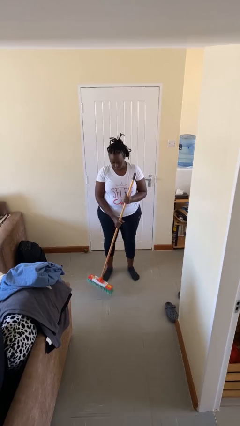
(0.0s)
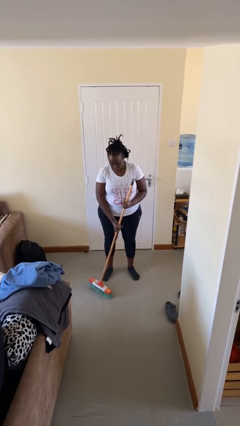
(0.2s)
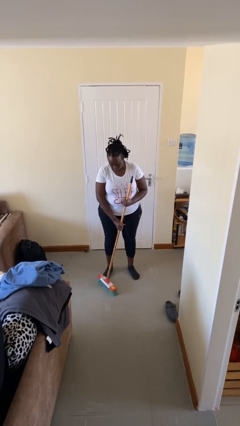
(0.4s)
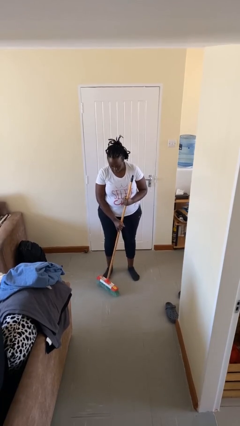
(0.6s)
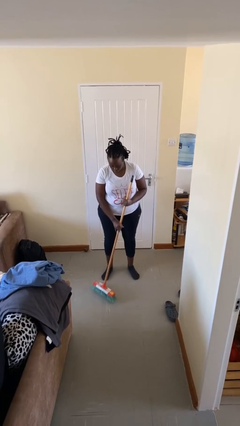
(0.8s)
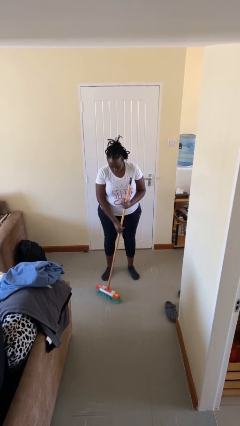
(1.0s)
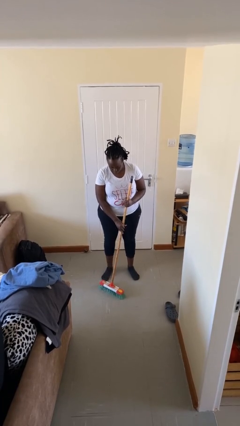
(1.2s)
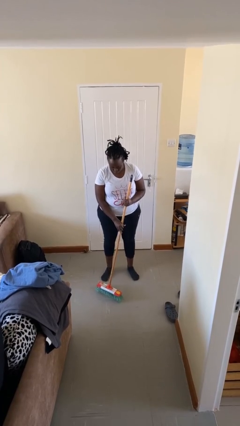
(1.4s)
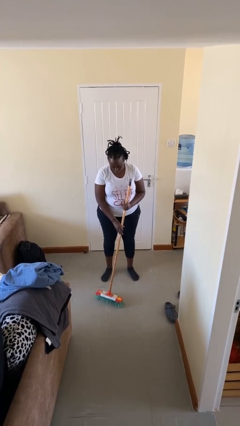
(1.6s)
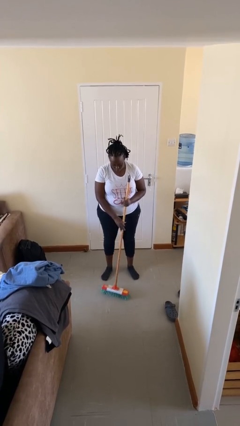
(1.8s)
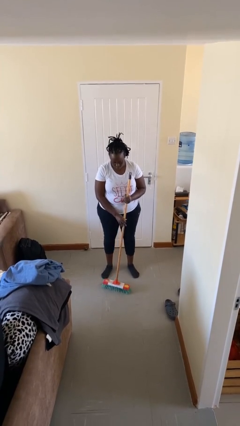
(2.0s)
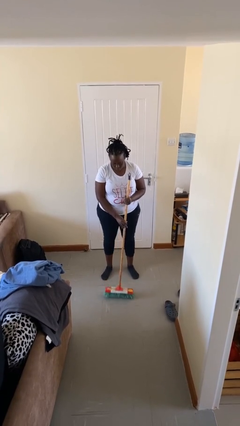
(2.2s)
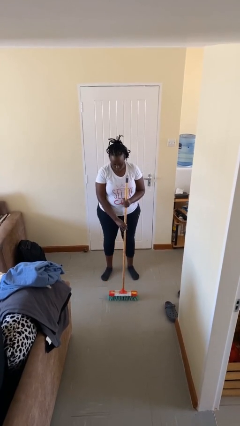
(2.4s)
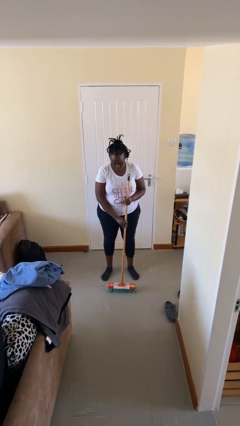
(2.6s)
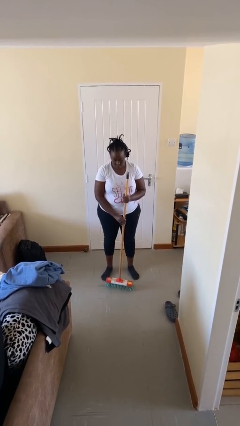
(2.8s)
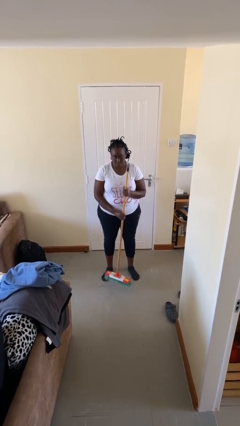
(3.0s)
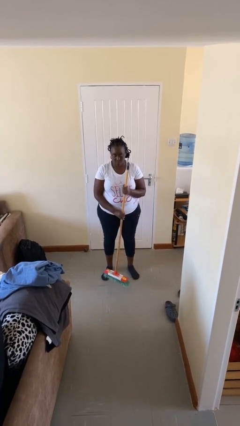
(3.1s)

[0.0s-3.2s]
person sweeps floor

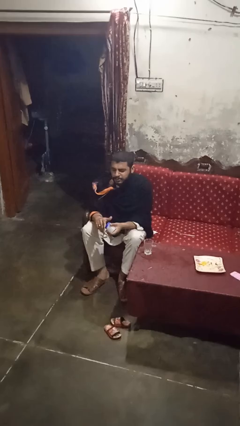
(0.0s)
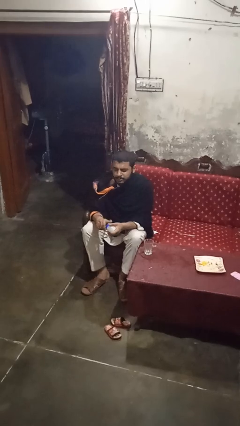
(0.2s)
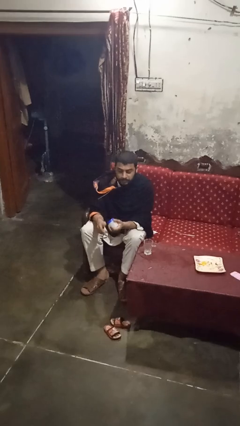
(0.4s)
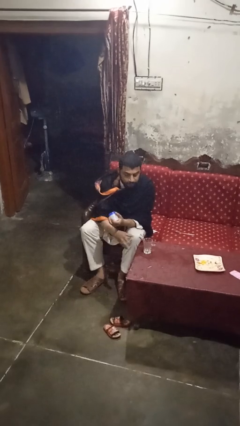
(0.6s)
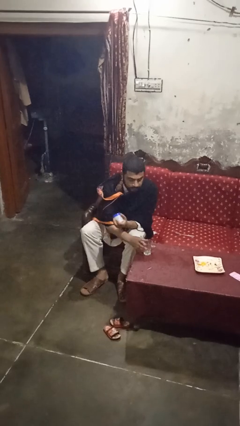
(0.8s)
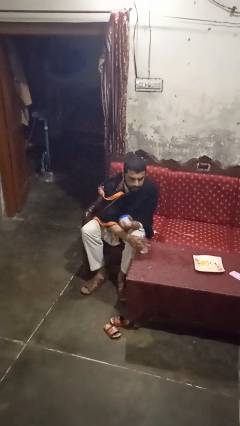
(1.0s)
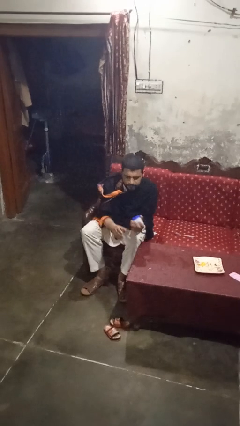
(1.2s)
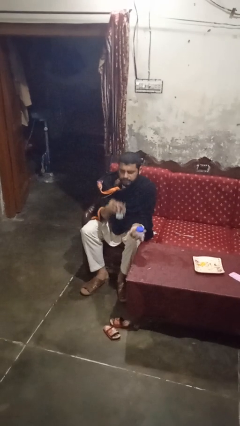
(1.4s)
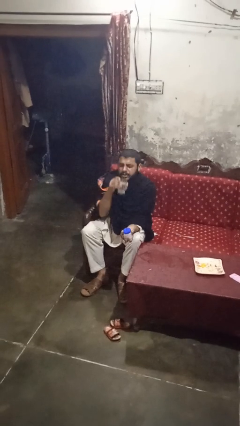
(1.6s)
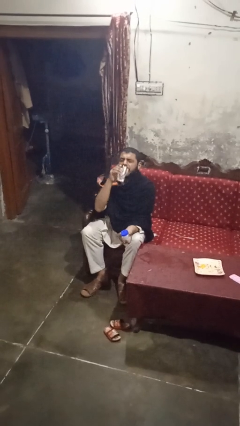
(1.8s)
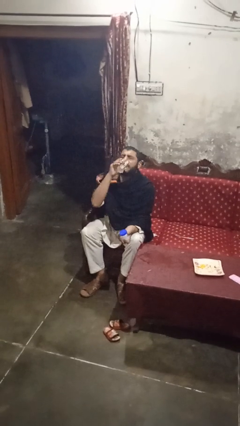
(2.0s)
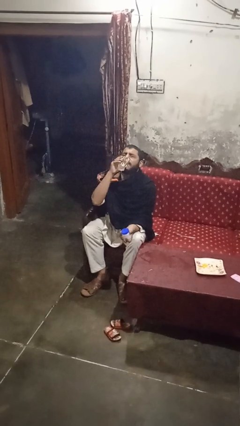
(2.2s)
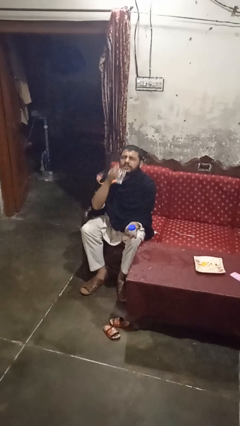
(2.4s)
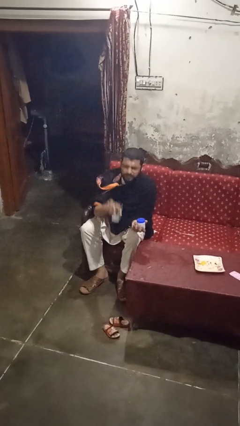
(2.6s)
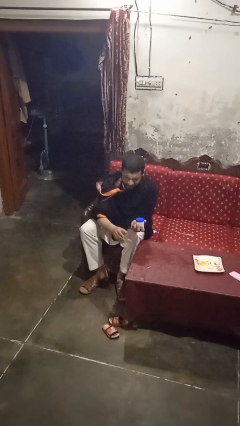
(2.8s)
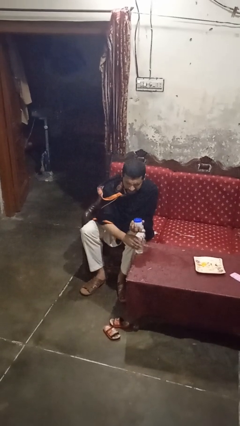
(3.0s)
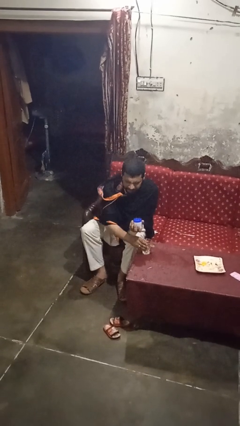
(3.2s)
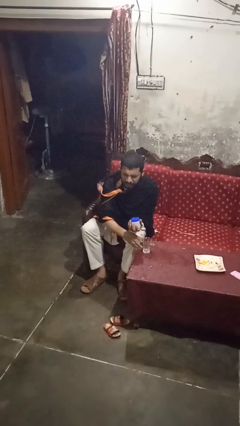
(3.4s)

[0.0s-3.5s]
person drinks from cup

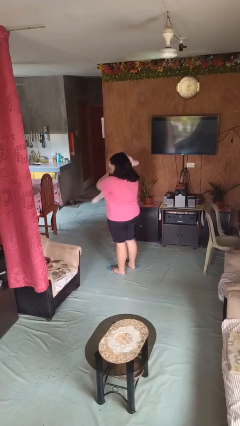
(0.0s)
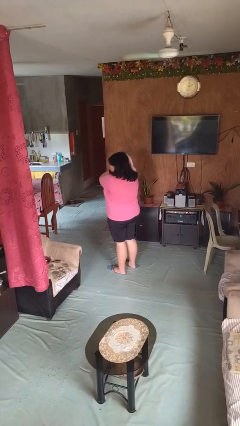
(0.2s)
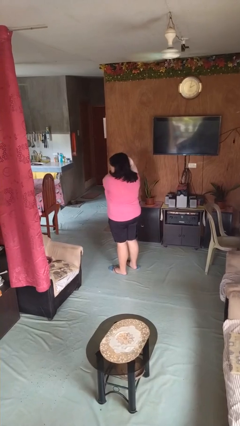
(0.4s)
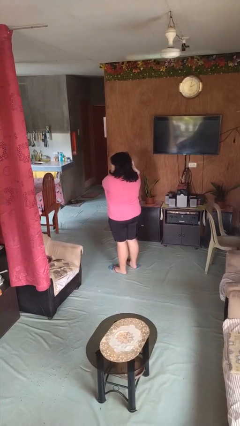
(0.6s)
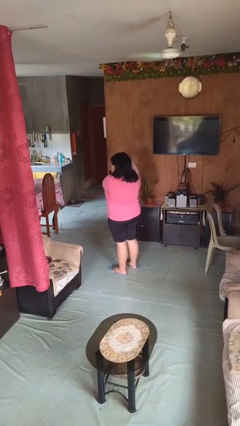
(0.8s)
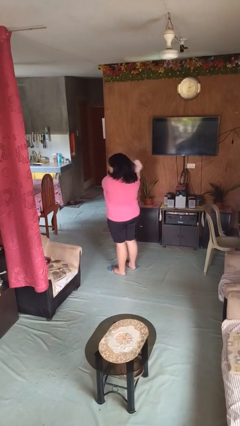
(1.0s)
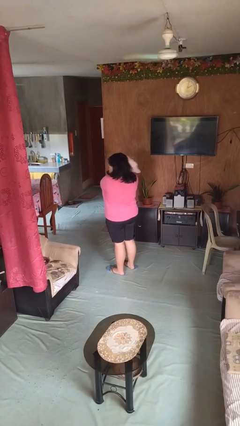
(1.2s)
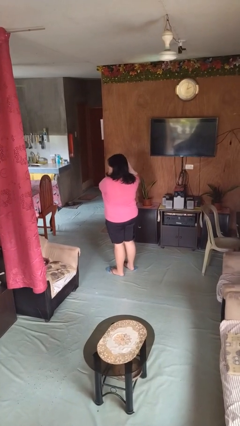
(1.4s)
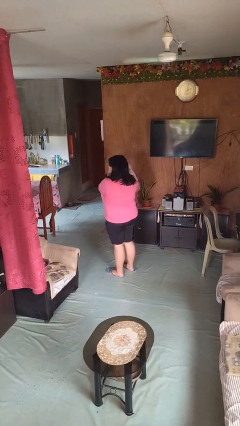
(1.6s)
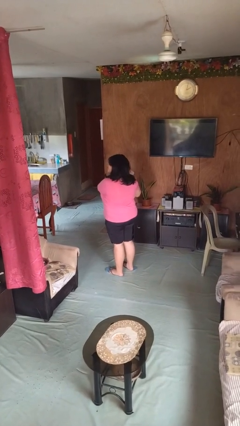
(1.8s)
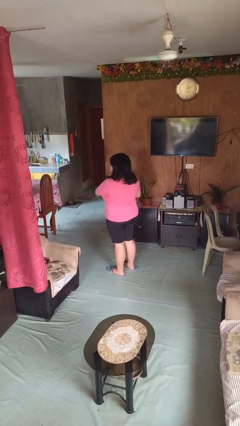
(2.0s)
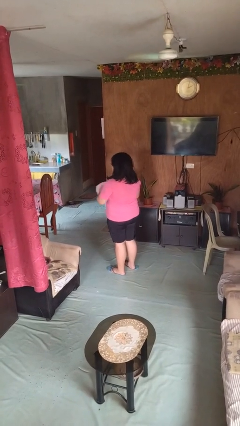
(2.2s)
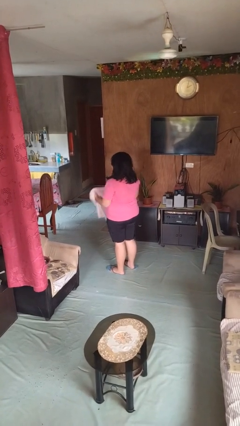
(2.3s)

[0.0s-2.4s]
person dries hair with towel

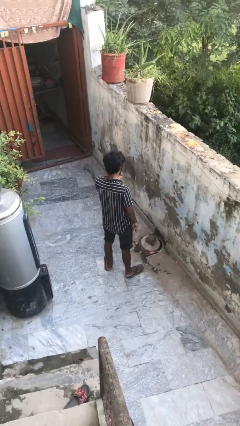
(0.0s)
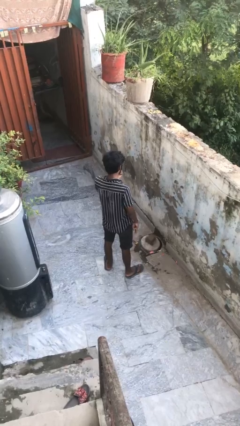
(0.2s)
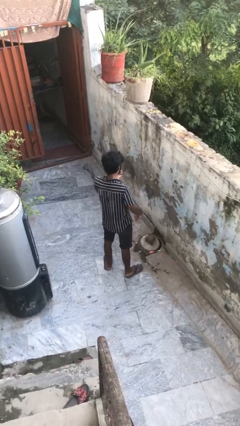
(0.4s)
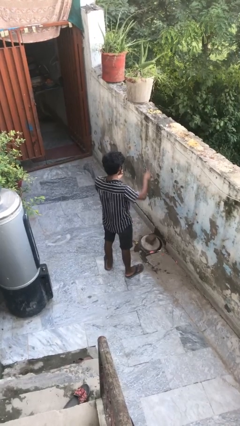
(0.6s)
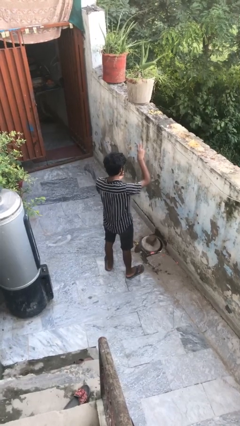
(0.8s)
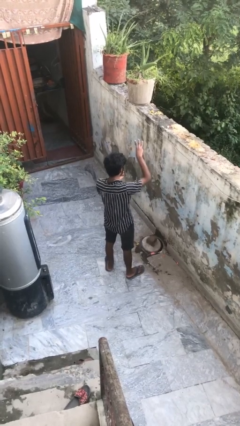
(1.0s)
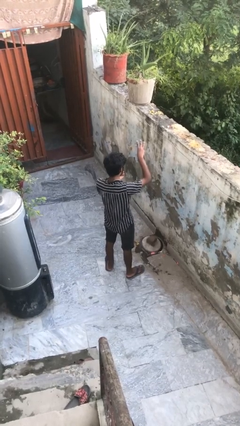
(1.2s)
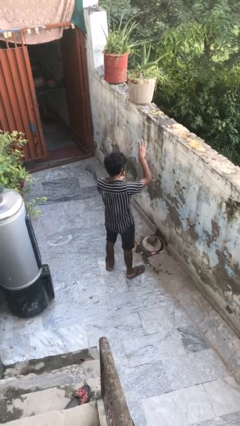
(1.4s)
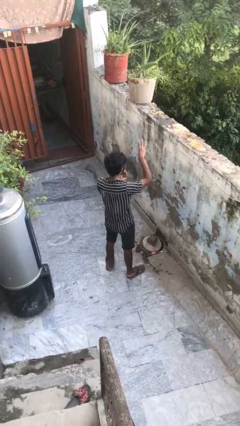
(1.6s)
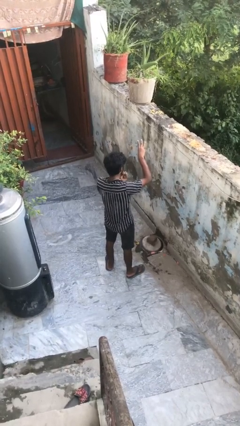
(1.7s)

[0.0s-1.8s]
person gestures number three

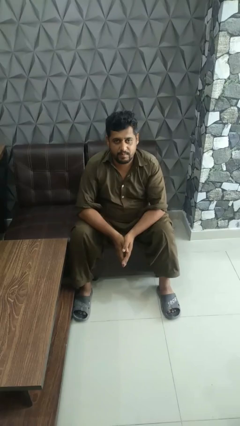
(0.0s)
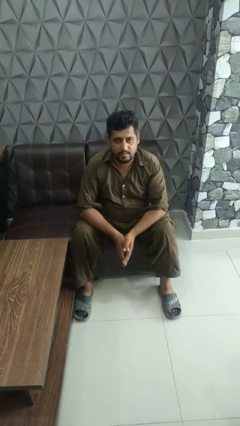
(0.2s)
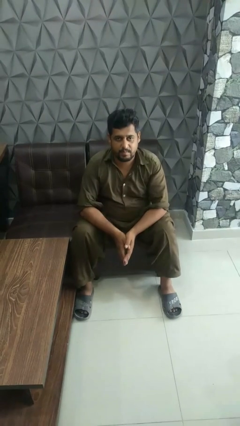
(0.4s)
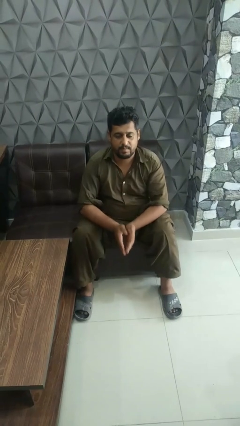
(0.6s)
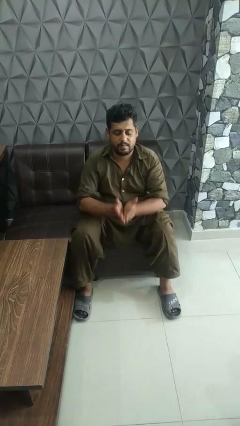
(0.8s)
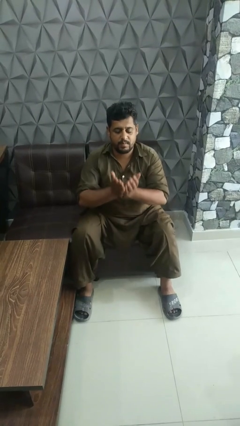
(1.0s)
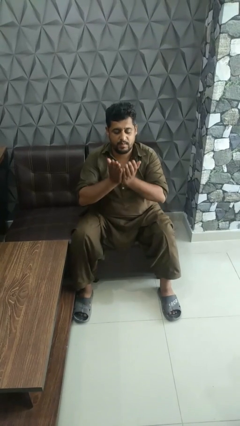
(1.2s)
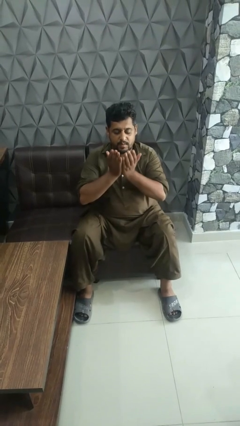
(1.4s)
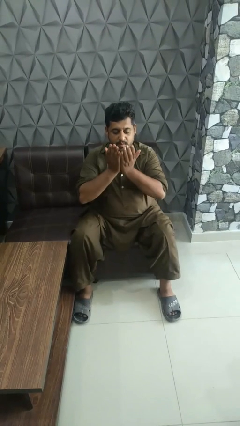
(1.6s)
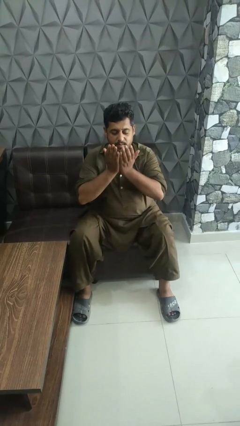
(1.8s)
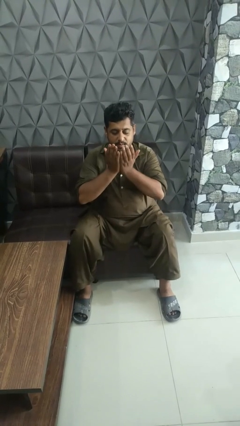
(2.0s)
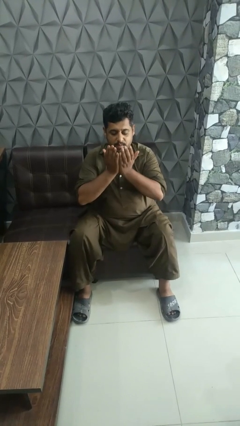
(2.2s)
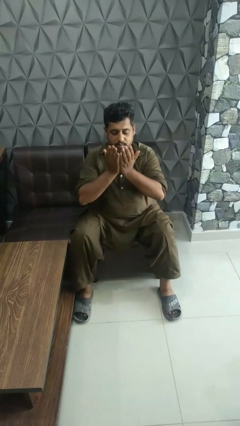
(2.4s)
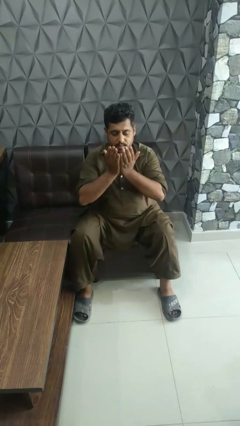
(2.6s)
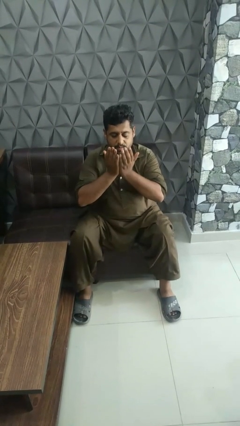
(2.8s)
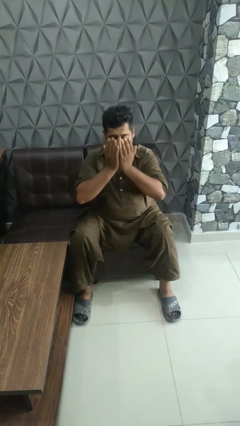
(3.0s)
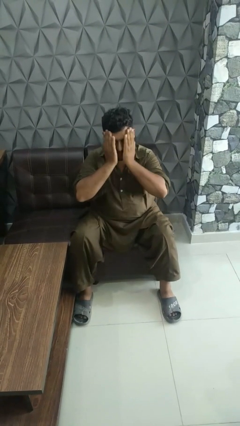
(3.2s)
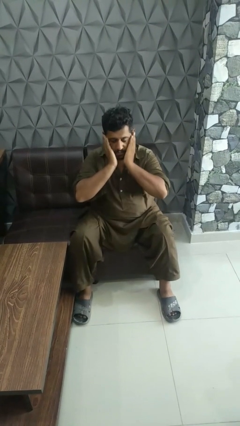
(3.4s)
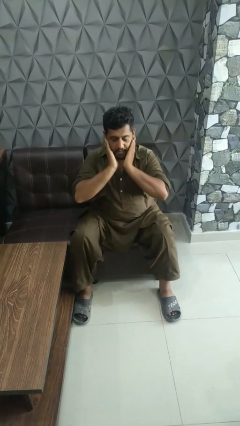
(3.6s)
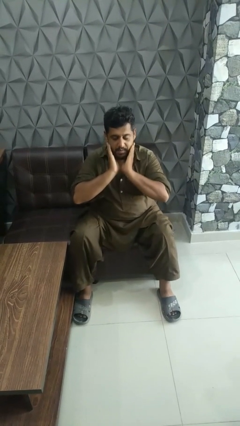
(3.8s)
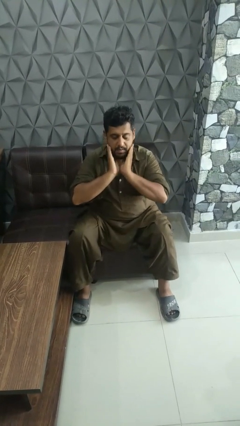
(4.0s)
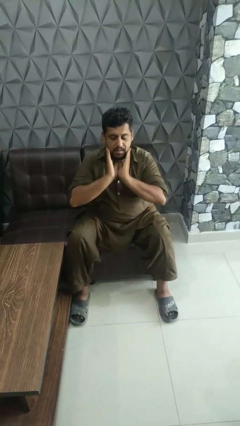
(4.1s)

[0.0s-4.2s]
person prays

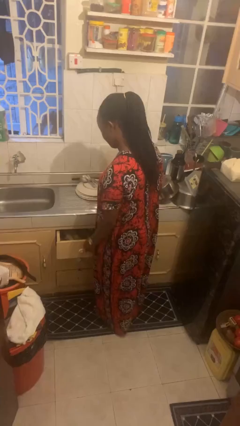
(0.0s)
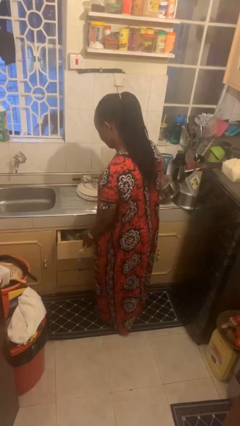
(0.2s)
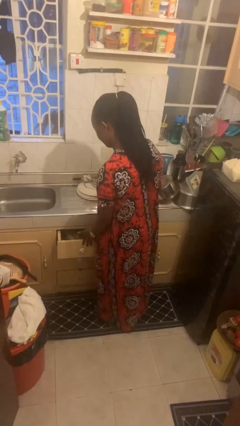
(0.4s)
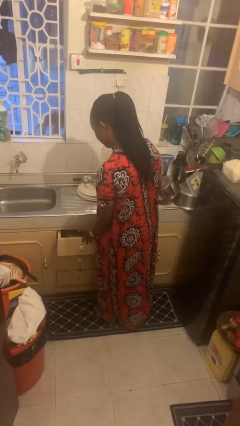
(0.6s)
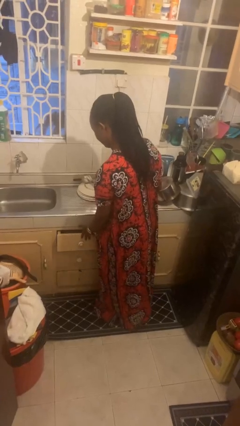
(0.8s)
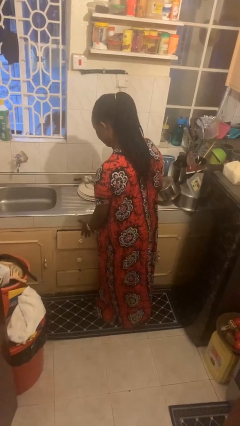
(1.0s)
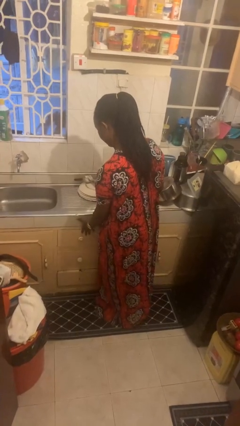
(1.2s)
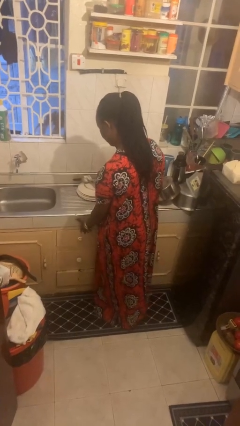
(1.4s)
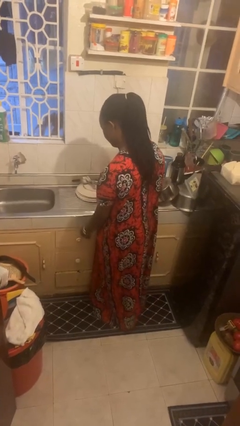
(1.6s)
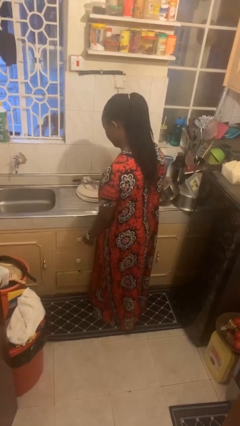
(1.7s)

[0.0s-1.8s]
person closes kitchen drawer

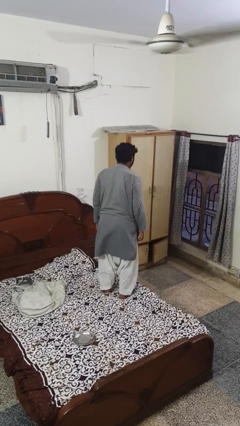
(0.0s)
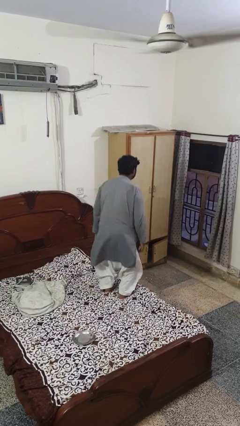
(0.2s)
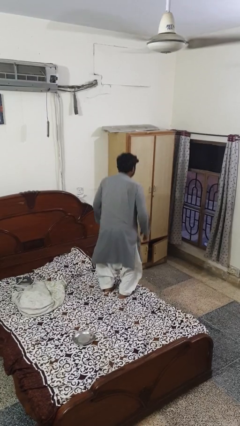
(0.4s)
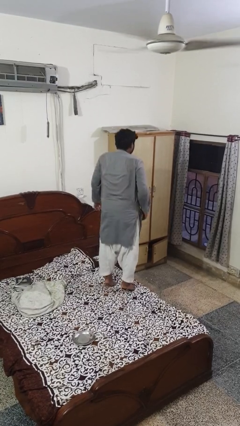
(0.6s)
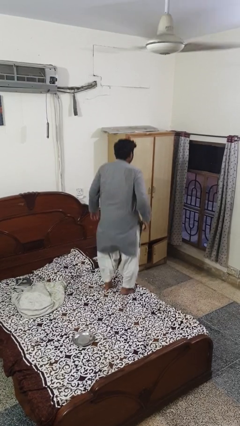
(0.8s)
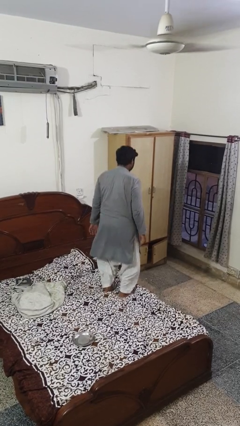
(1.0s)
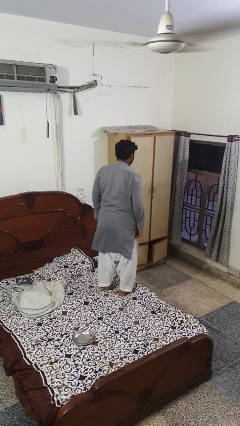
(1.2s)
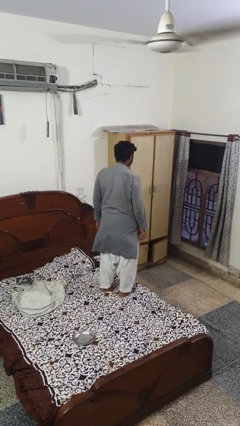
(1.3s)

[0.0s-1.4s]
person jumps on bed
